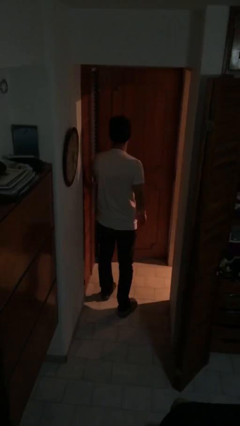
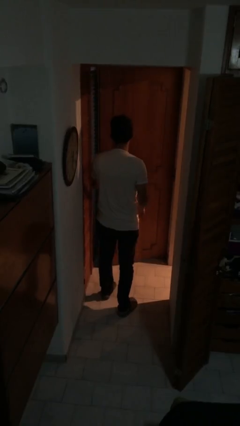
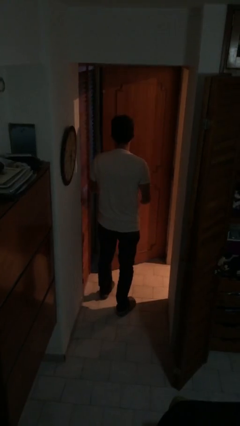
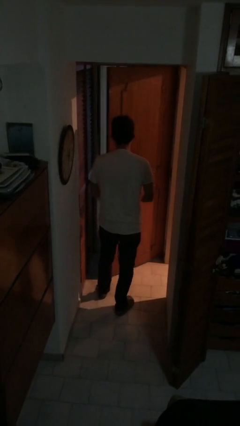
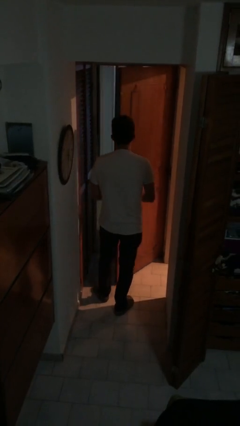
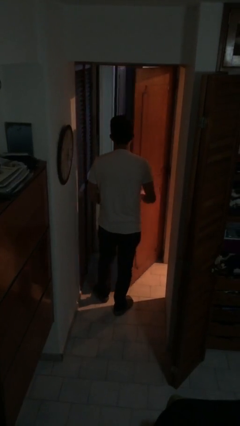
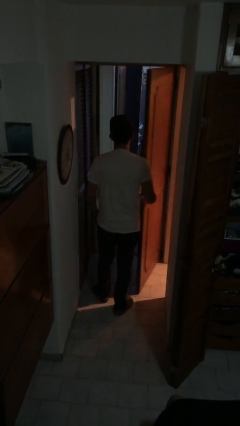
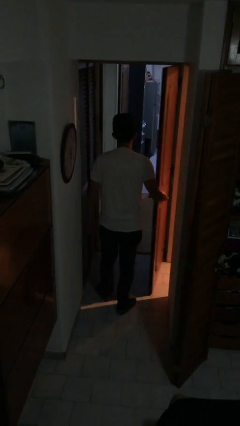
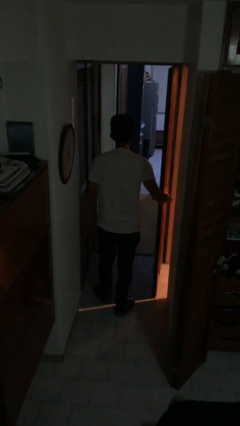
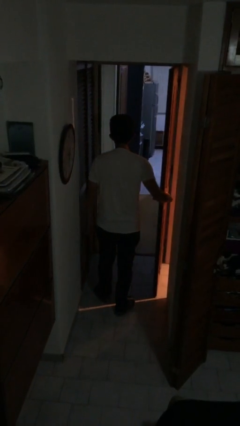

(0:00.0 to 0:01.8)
person opens facility door

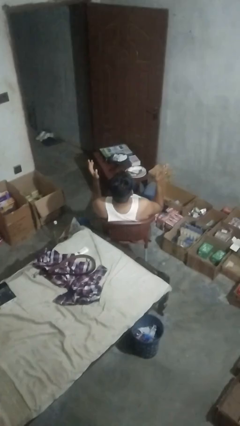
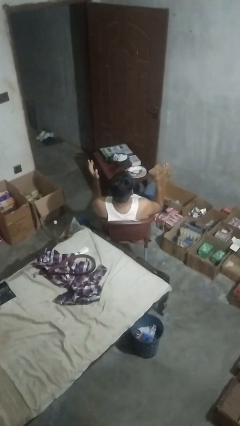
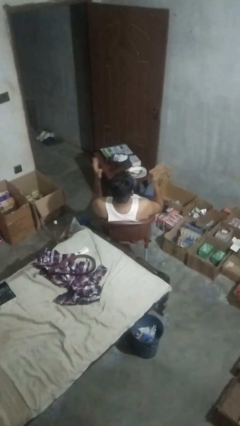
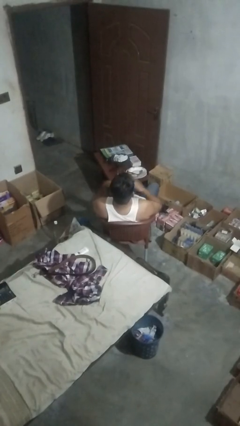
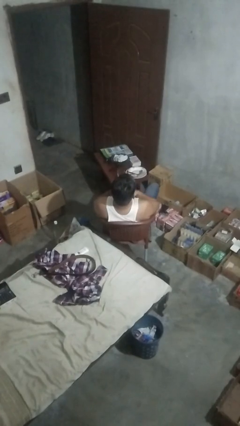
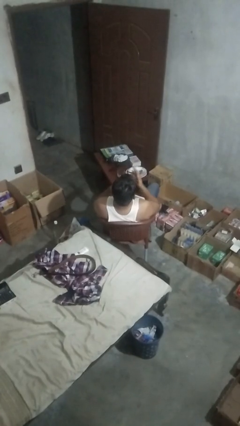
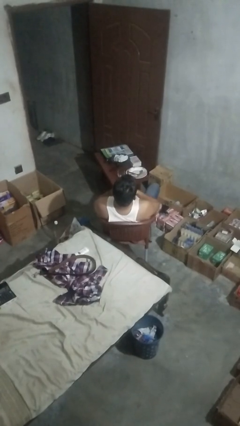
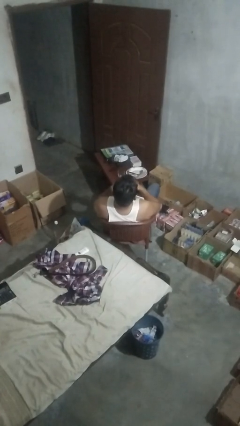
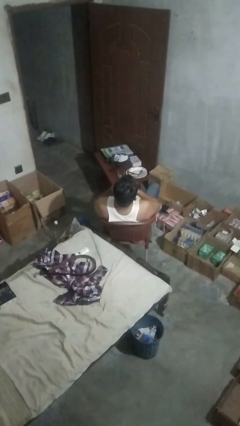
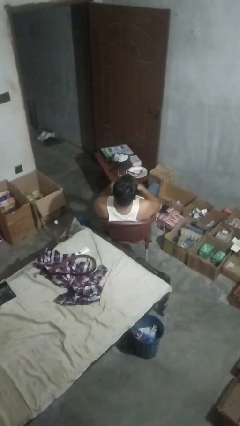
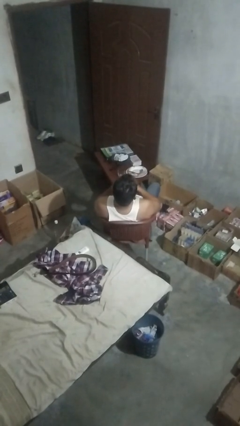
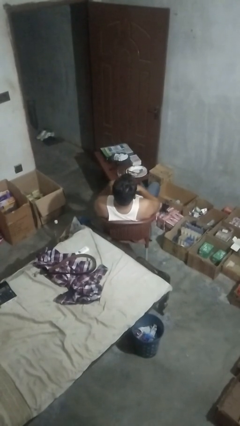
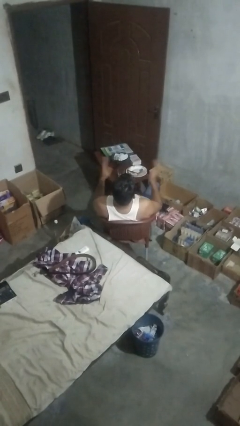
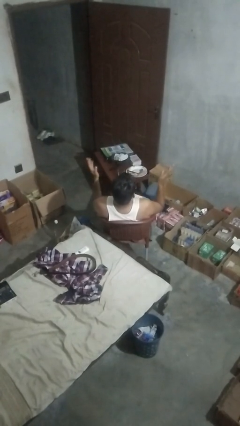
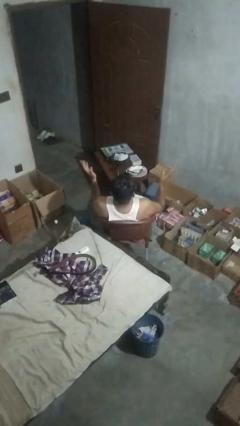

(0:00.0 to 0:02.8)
person drums on chest

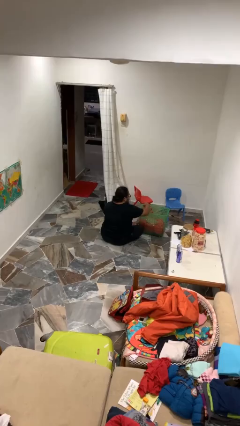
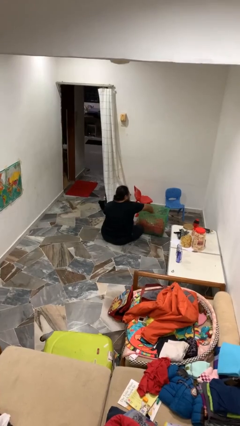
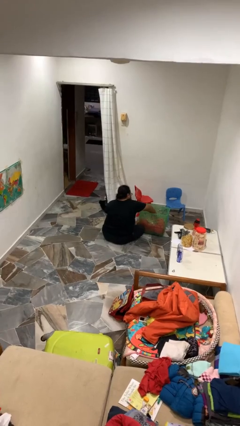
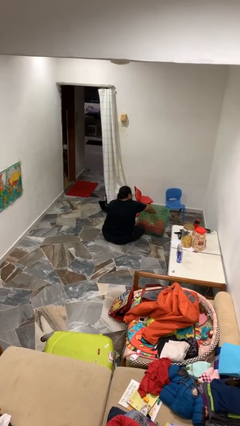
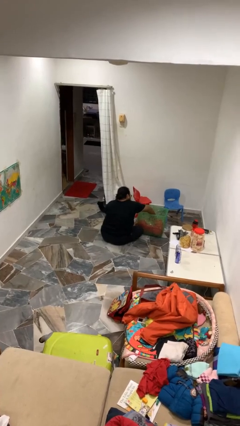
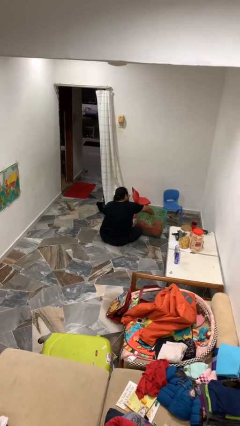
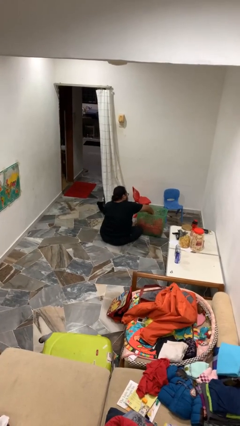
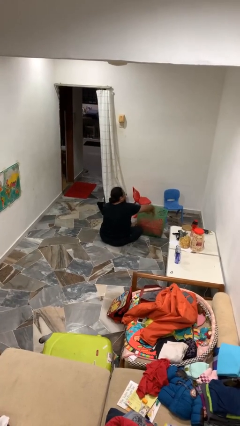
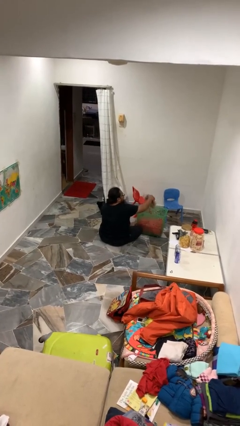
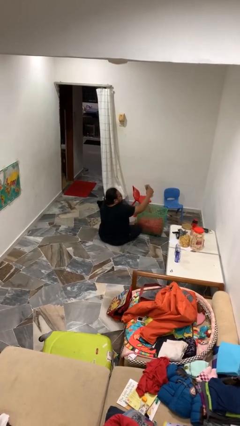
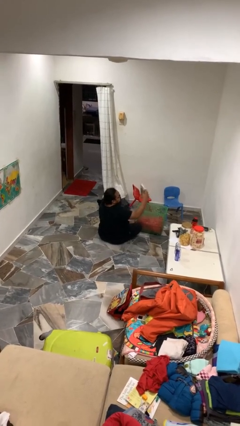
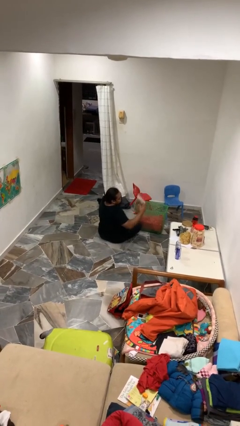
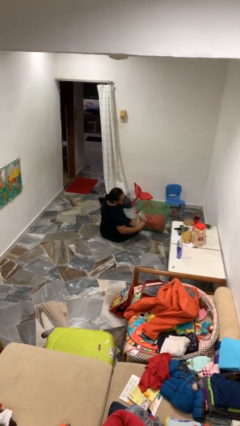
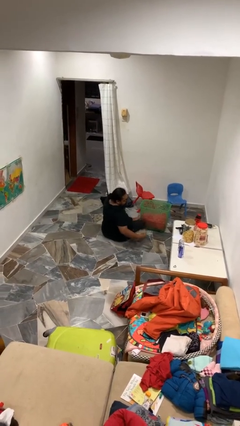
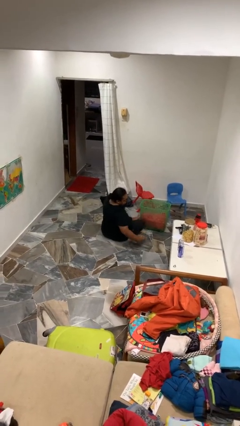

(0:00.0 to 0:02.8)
person takes object from basket

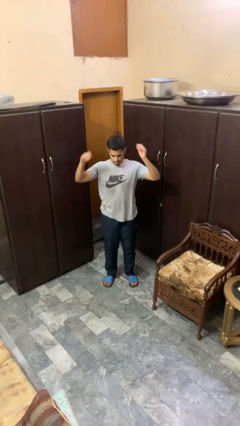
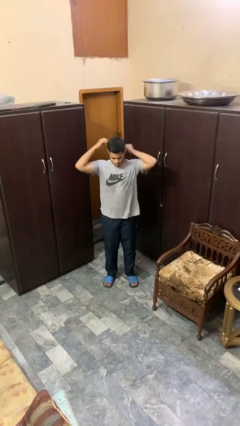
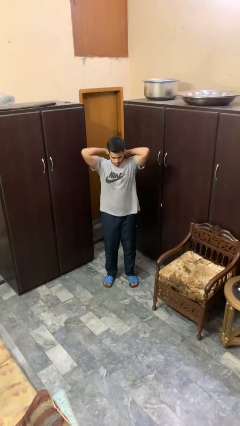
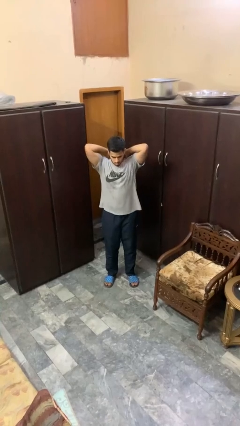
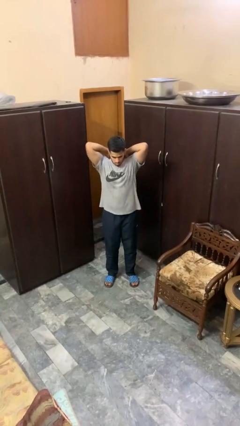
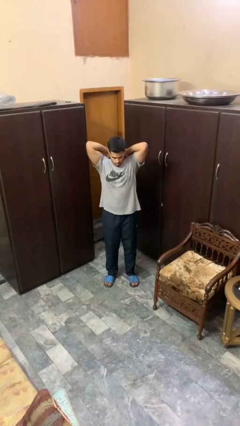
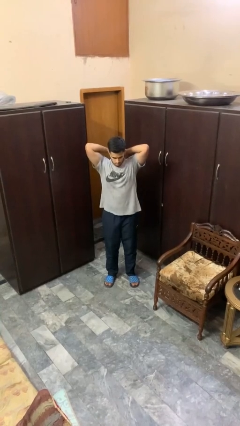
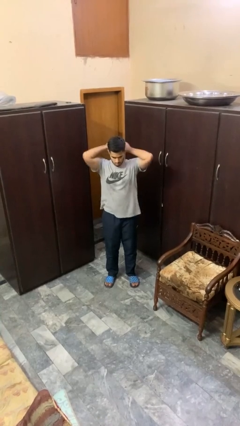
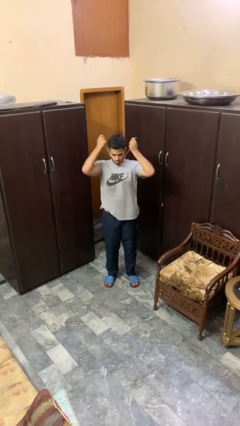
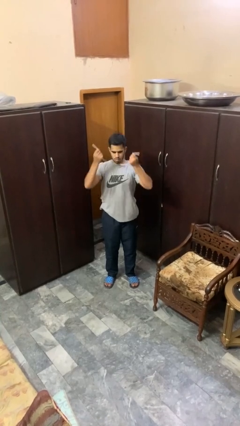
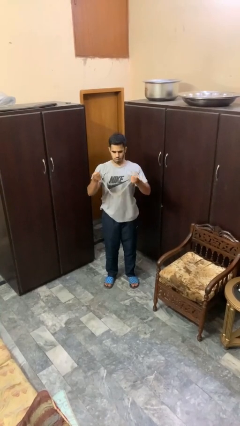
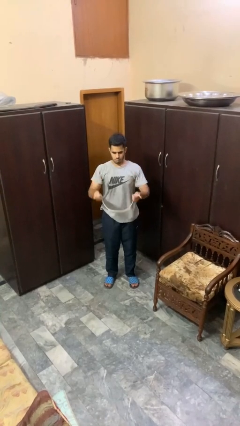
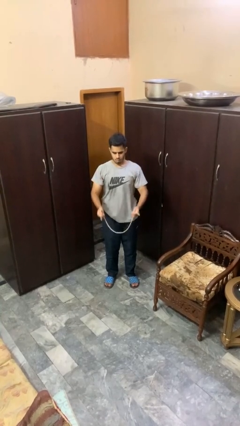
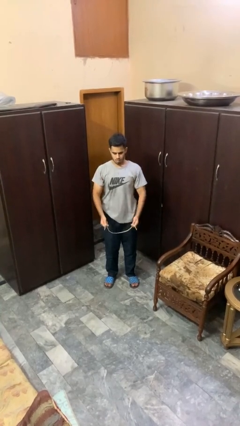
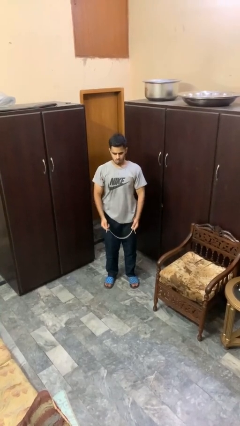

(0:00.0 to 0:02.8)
person takes off necklace

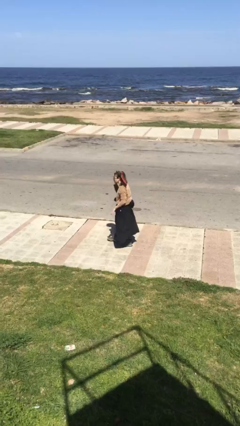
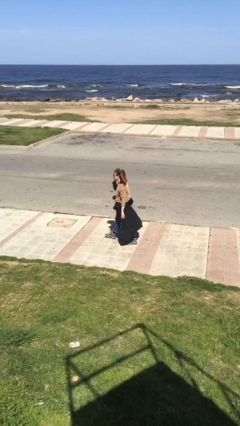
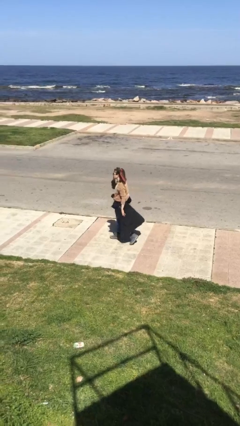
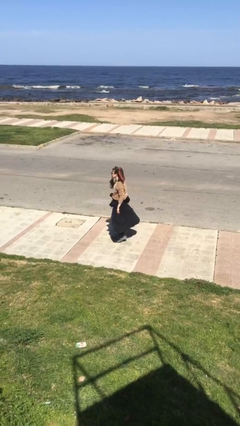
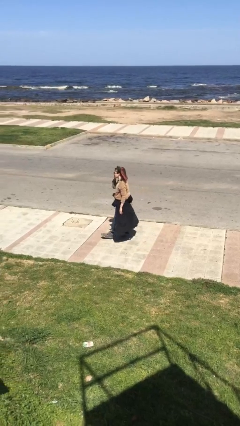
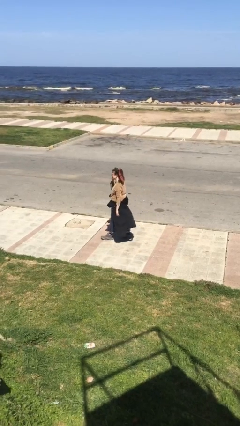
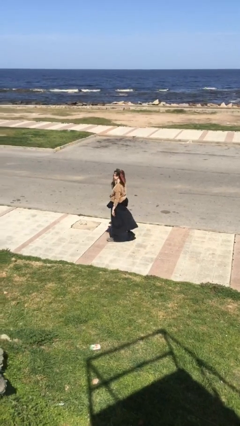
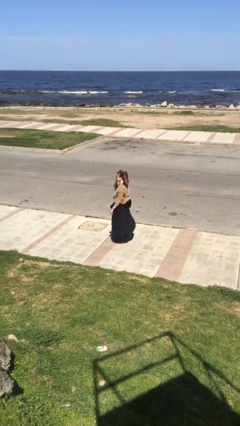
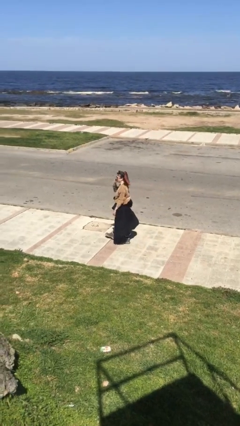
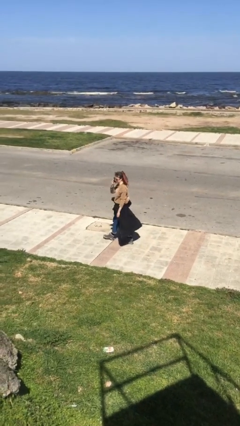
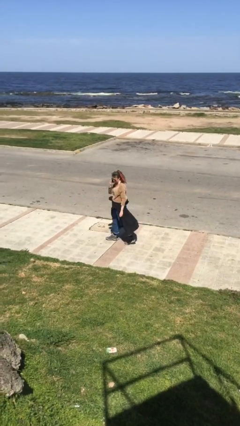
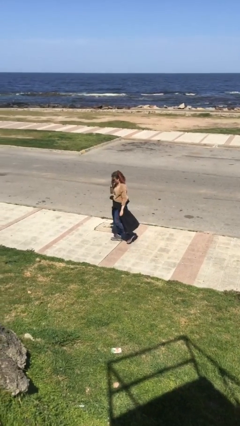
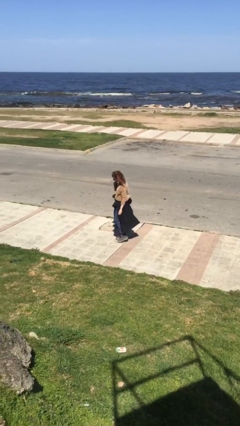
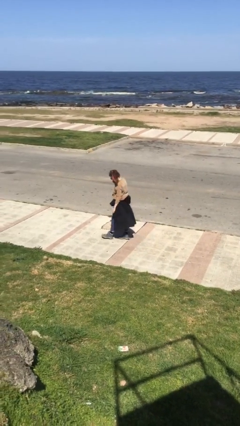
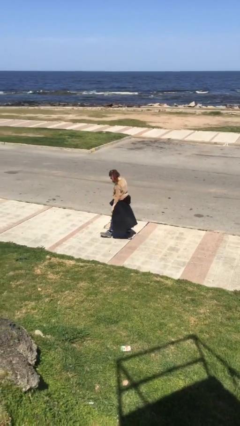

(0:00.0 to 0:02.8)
person talks on phone

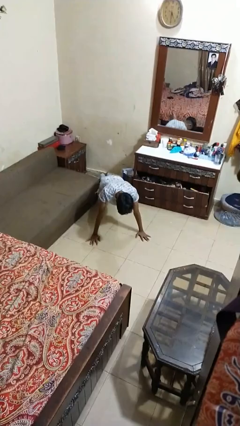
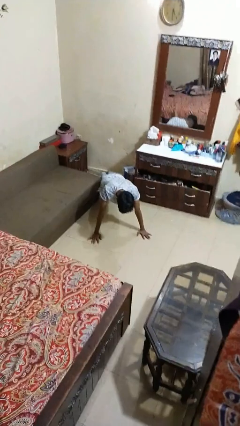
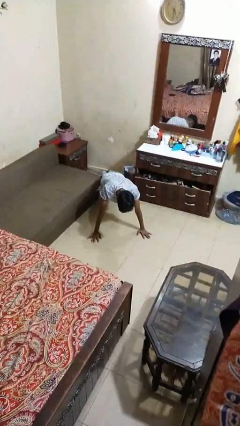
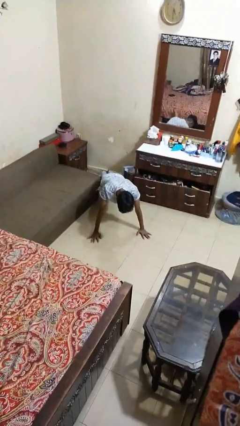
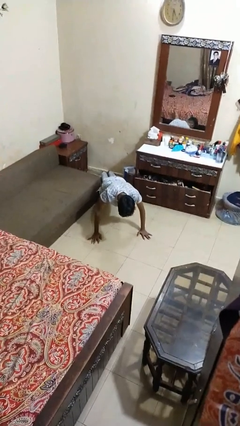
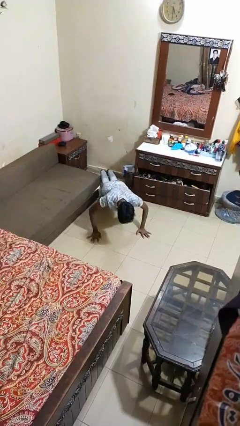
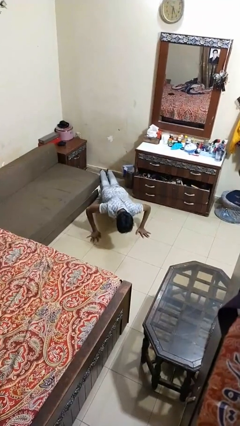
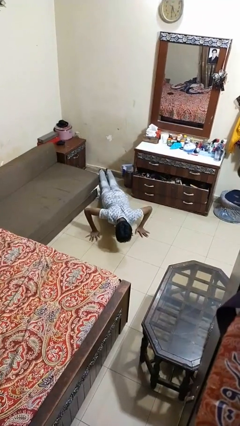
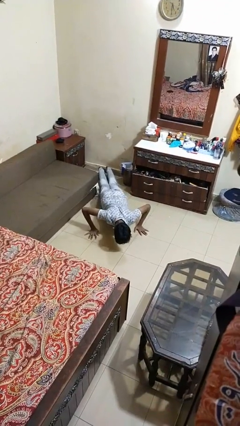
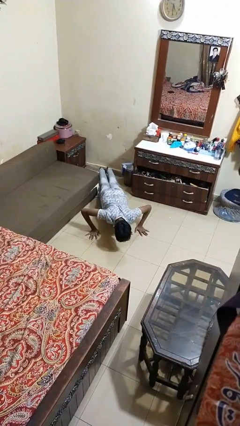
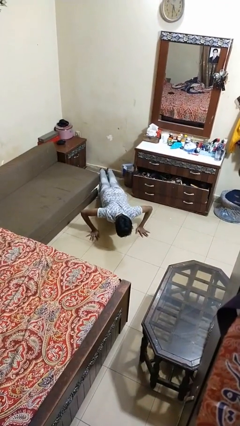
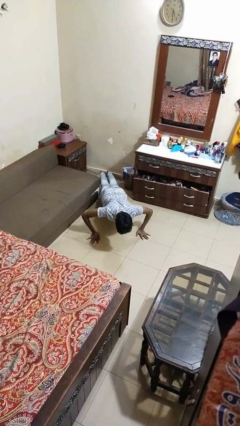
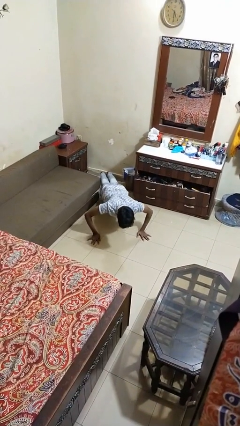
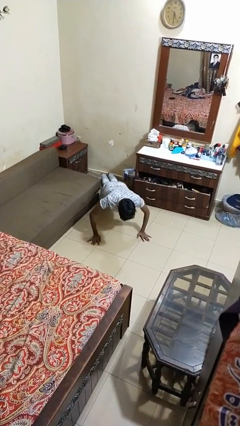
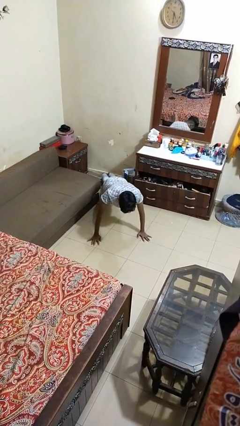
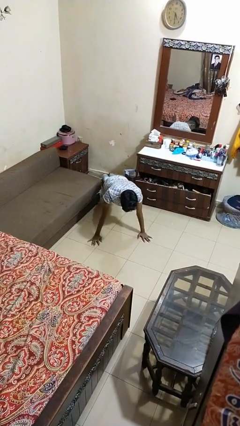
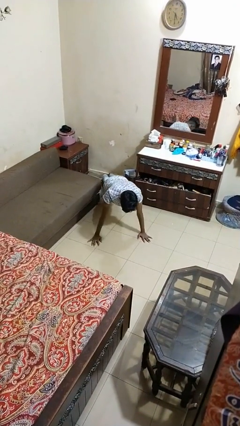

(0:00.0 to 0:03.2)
person exercises with pushup

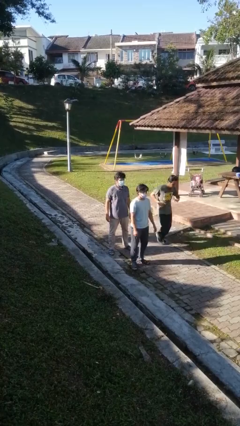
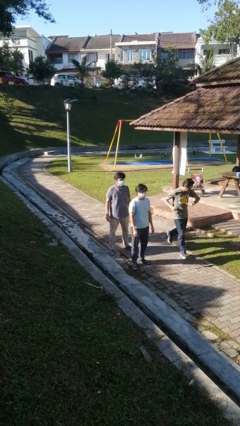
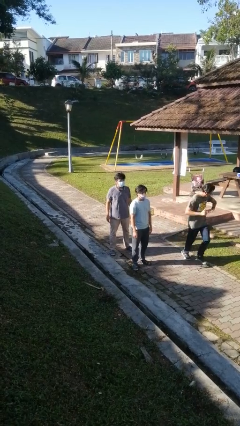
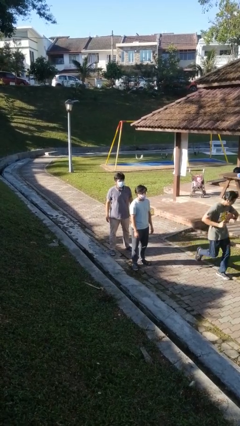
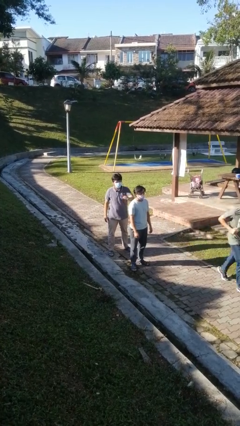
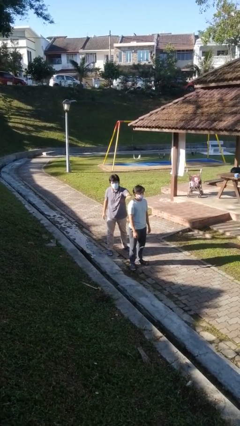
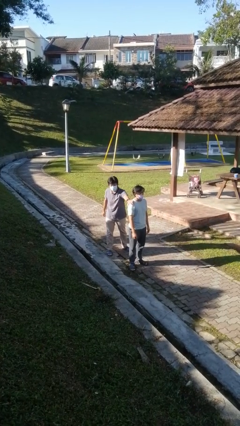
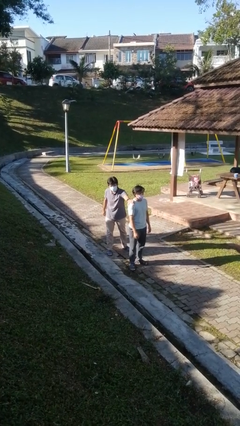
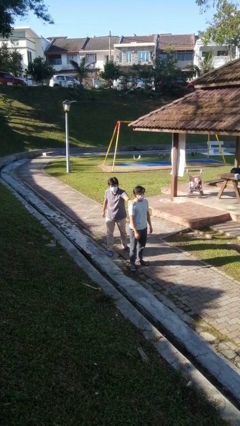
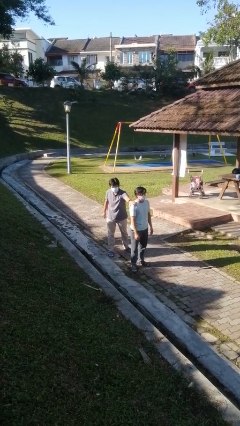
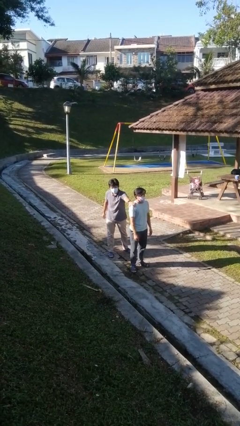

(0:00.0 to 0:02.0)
person grabs person by shoulder
